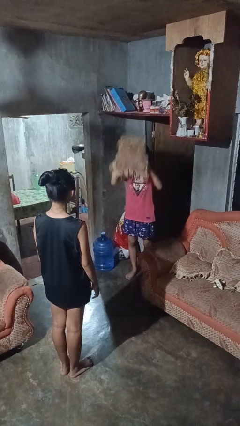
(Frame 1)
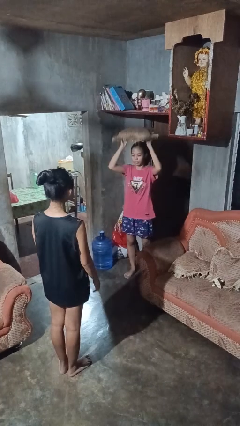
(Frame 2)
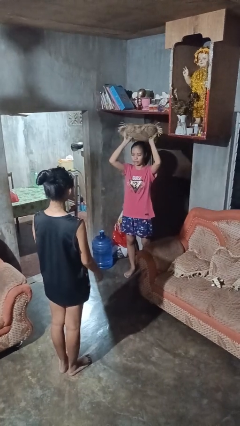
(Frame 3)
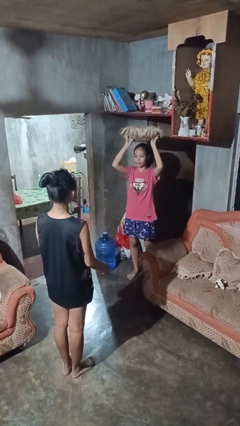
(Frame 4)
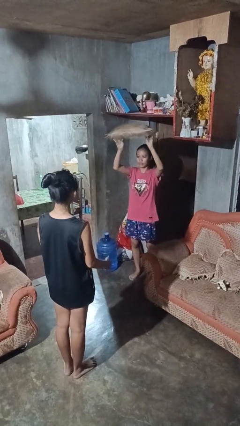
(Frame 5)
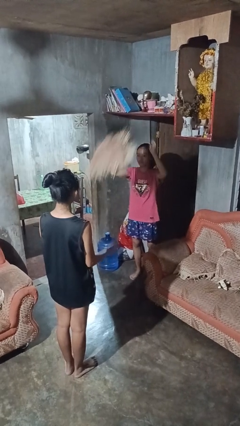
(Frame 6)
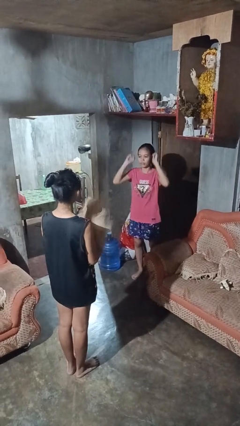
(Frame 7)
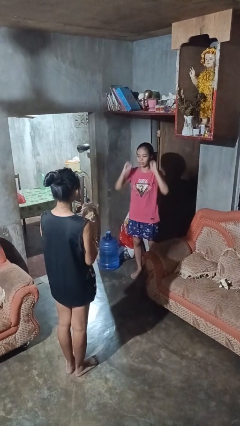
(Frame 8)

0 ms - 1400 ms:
person throws object to person

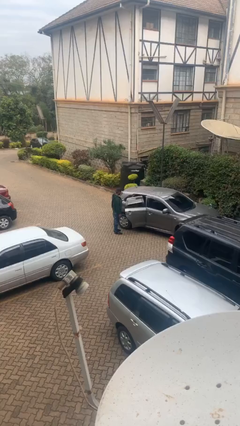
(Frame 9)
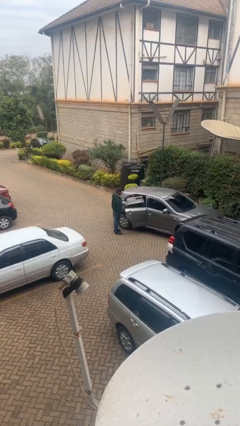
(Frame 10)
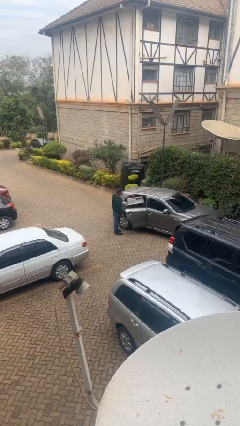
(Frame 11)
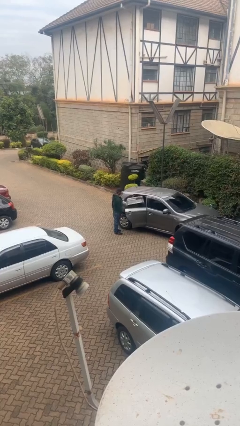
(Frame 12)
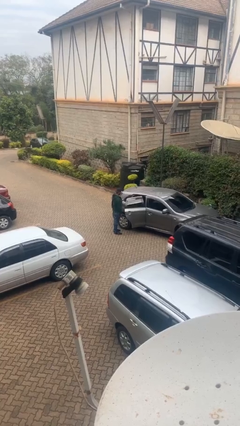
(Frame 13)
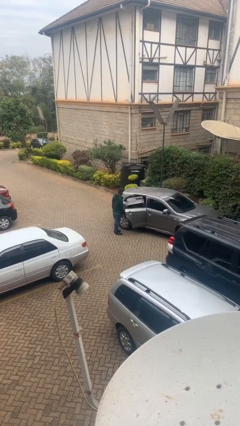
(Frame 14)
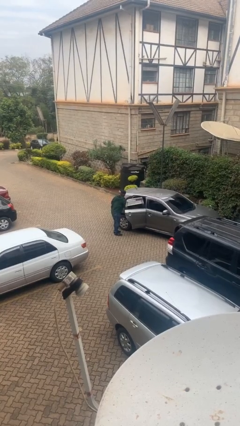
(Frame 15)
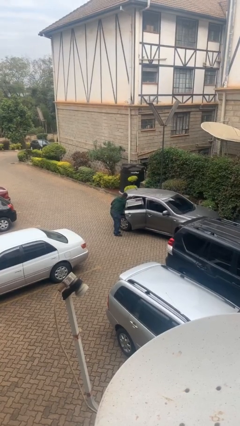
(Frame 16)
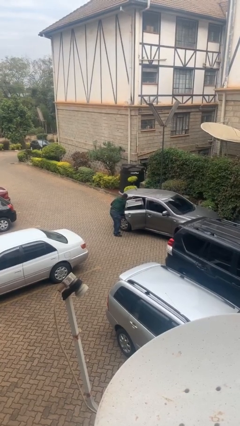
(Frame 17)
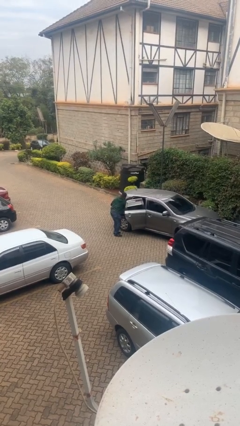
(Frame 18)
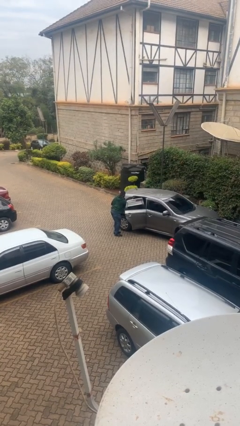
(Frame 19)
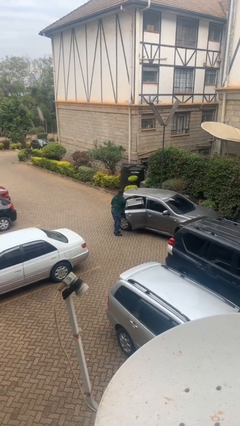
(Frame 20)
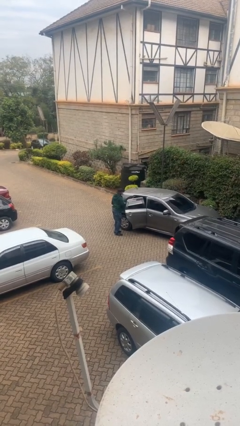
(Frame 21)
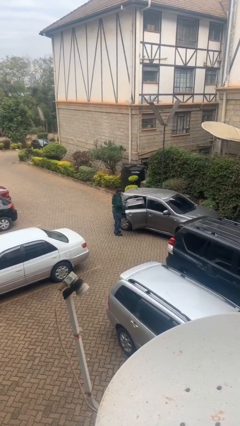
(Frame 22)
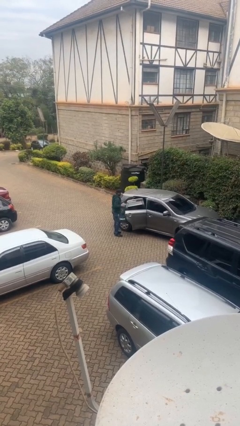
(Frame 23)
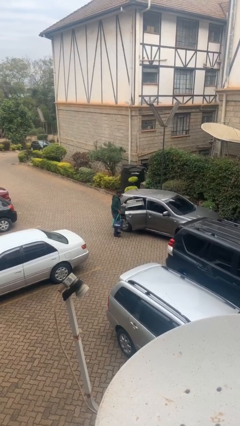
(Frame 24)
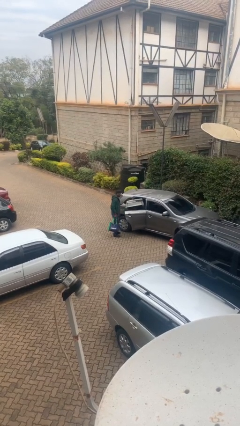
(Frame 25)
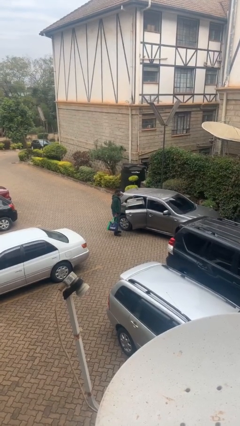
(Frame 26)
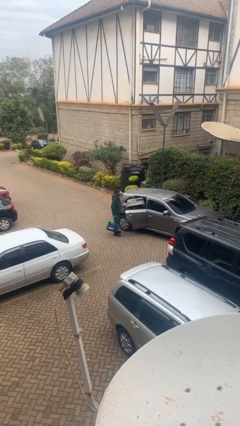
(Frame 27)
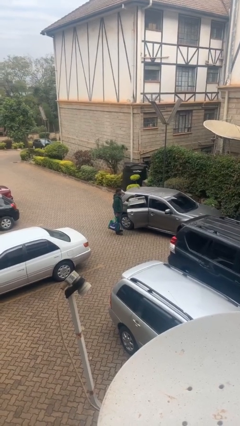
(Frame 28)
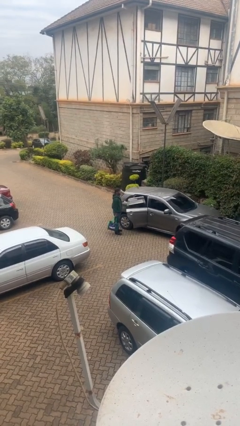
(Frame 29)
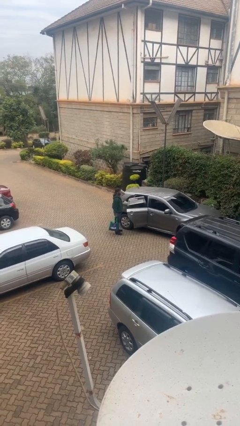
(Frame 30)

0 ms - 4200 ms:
person unloads car
